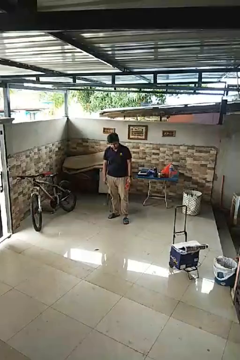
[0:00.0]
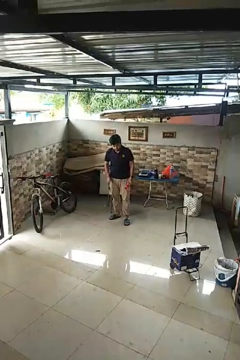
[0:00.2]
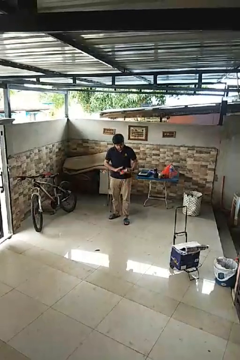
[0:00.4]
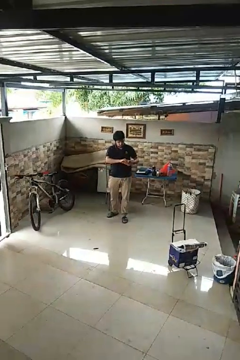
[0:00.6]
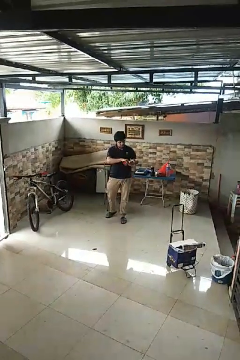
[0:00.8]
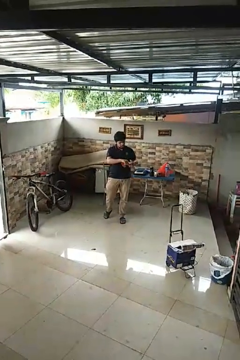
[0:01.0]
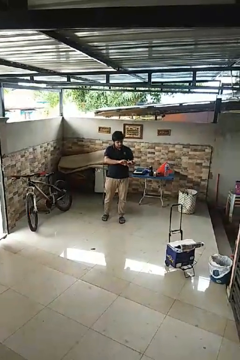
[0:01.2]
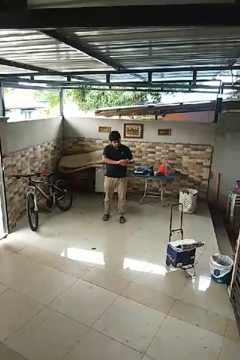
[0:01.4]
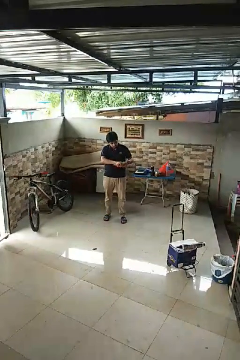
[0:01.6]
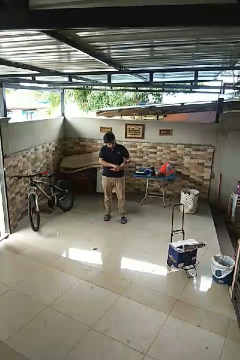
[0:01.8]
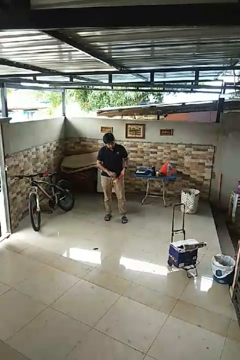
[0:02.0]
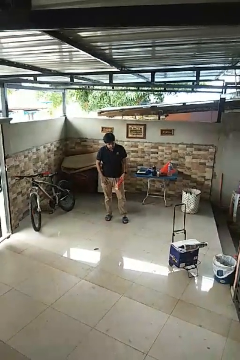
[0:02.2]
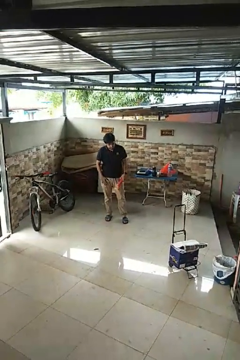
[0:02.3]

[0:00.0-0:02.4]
person squeezes object

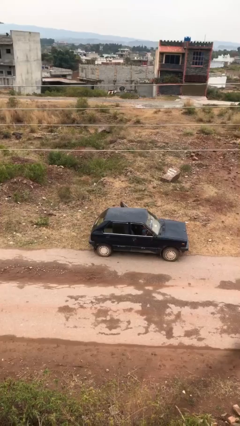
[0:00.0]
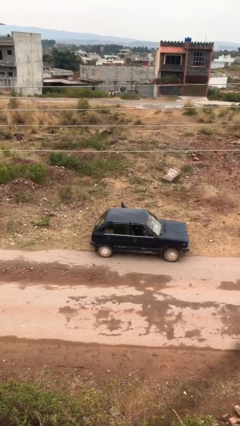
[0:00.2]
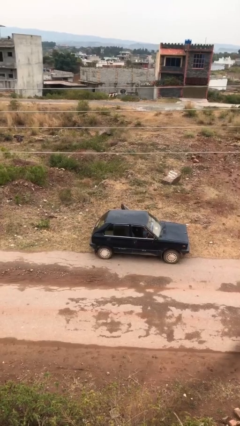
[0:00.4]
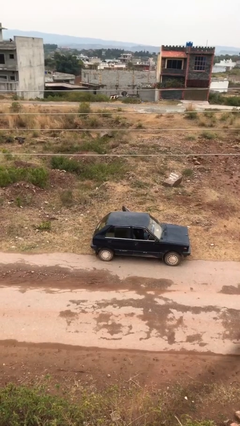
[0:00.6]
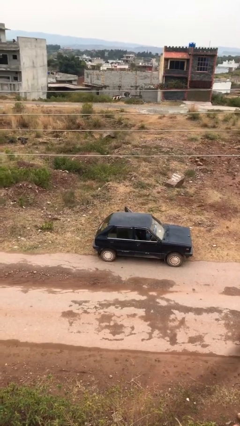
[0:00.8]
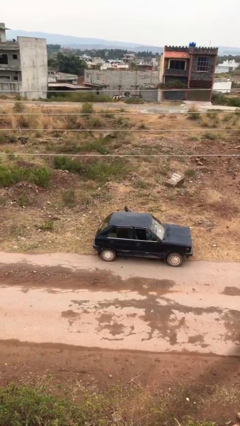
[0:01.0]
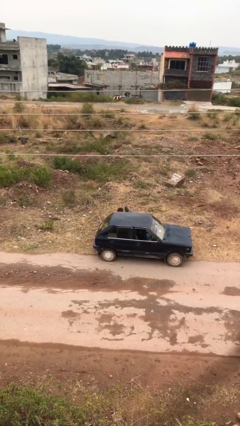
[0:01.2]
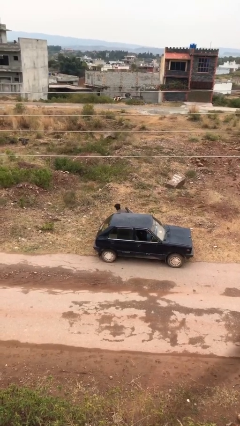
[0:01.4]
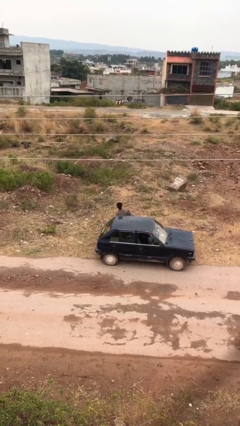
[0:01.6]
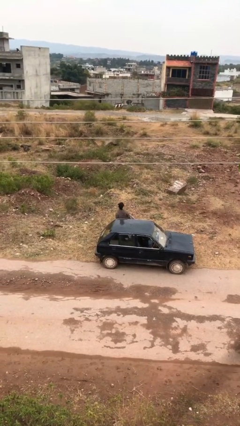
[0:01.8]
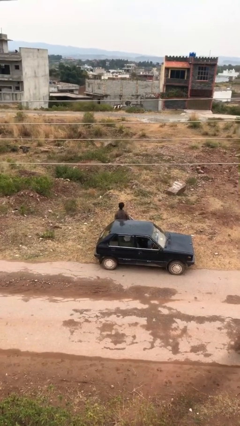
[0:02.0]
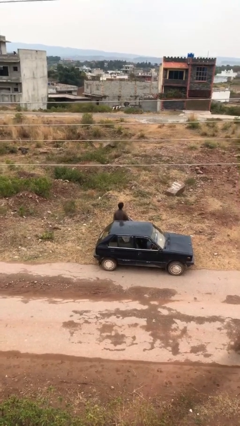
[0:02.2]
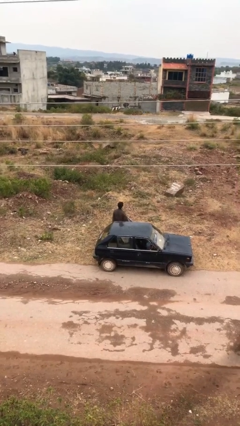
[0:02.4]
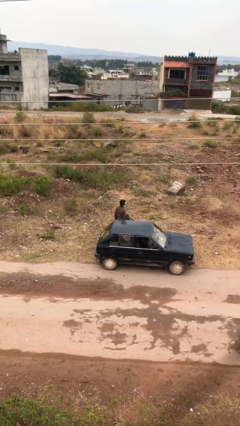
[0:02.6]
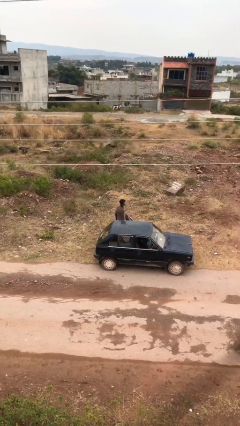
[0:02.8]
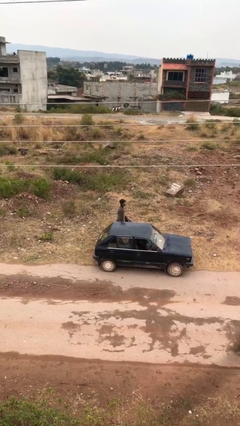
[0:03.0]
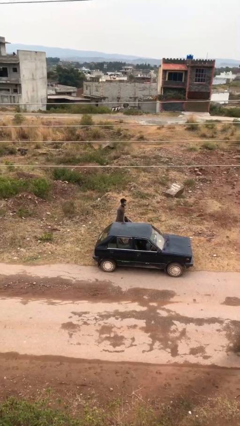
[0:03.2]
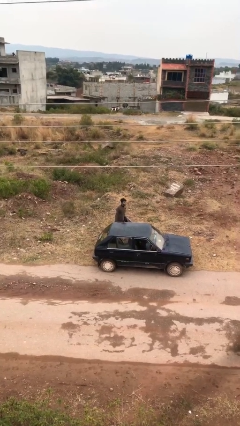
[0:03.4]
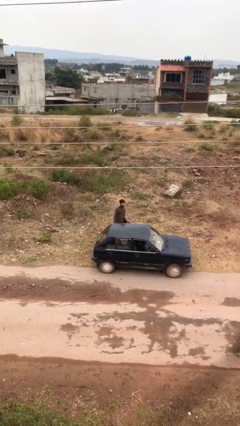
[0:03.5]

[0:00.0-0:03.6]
person exits car

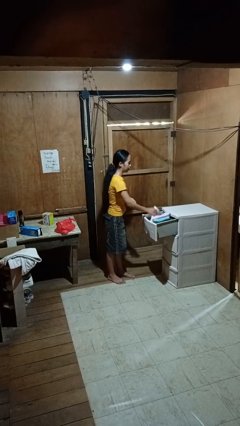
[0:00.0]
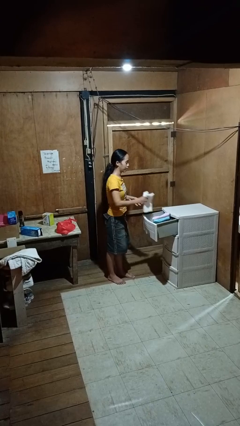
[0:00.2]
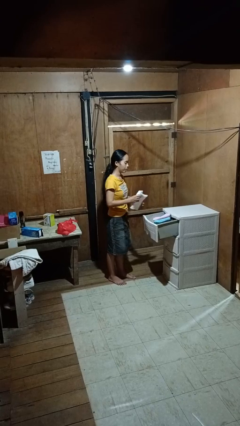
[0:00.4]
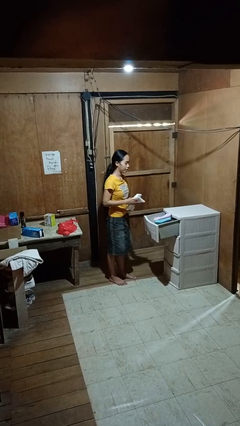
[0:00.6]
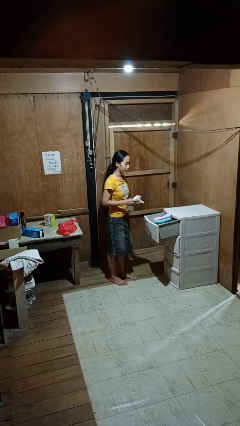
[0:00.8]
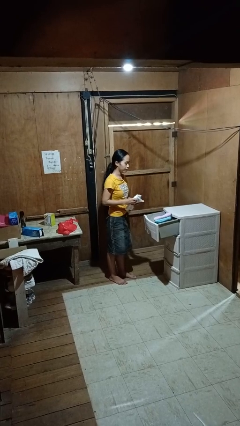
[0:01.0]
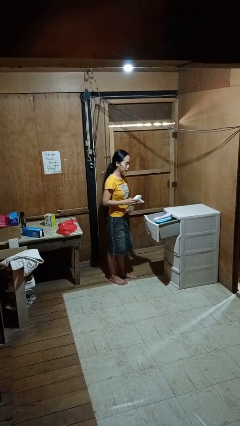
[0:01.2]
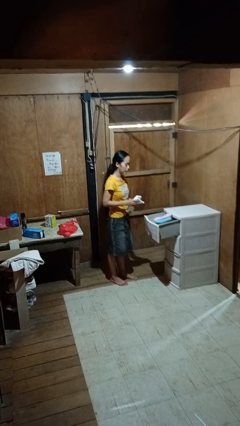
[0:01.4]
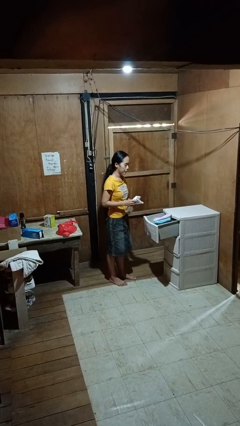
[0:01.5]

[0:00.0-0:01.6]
person takes clothes from dresser

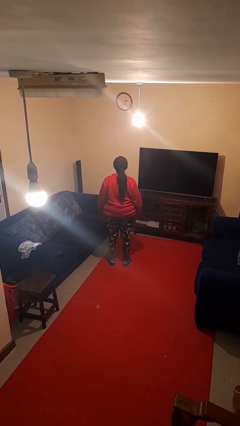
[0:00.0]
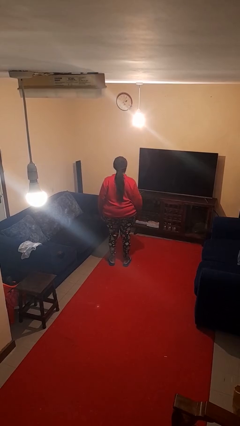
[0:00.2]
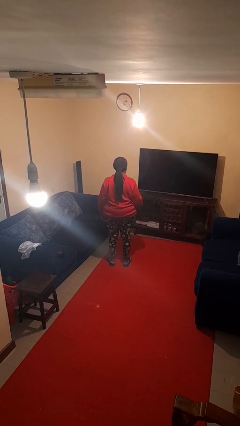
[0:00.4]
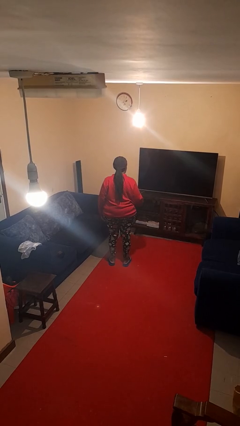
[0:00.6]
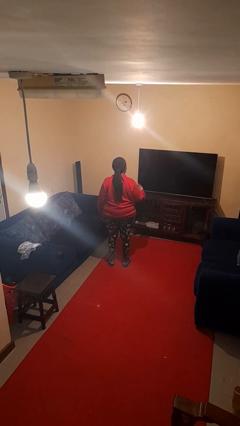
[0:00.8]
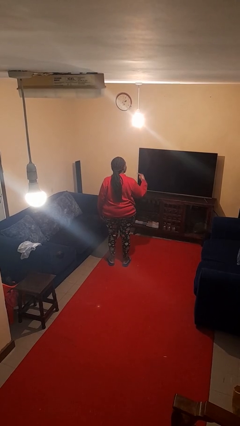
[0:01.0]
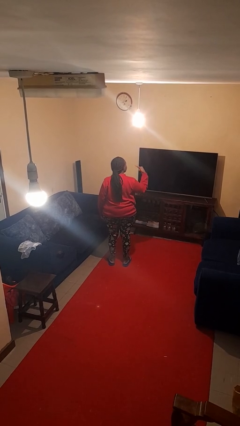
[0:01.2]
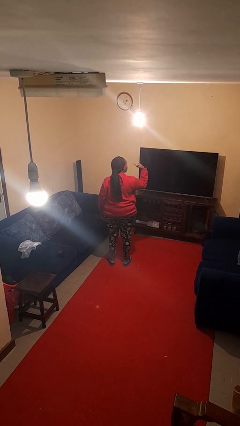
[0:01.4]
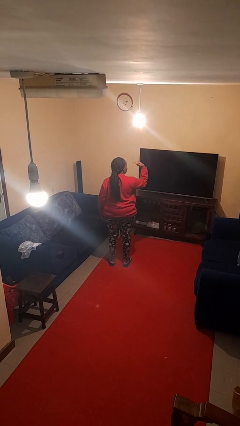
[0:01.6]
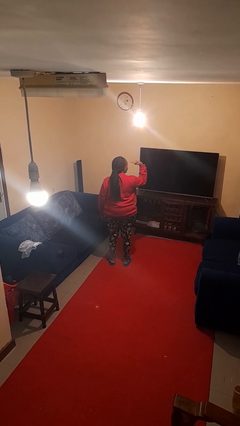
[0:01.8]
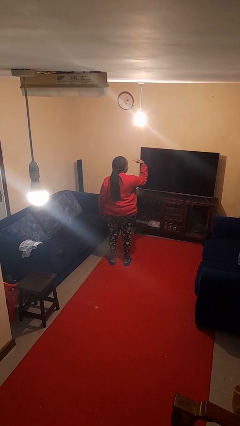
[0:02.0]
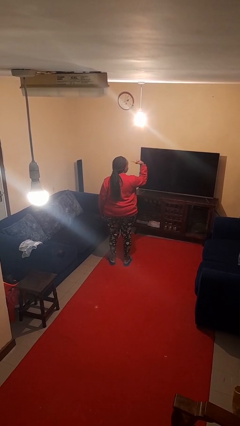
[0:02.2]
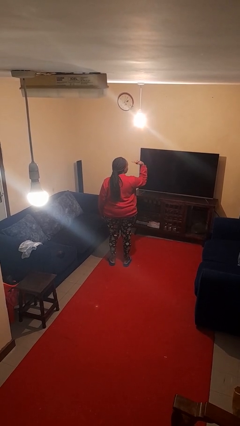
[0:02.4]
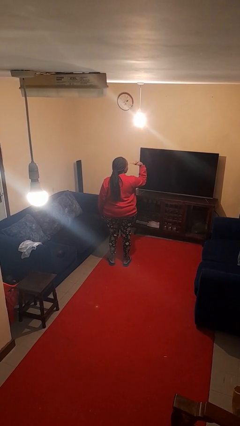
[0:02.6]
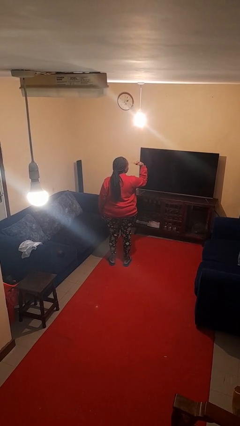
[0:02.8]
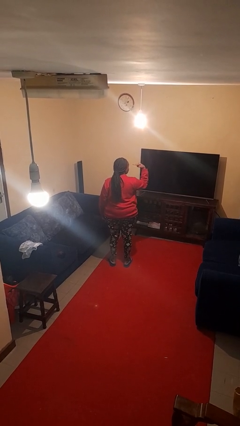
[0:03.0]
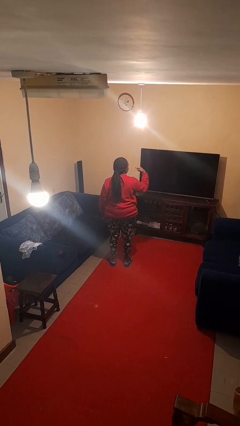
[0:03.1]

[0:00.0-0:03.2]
person gestures watch closely

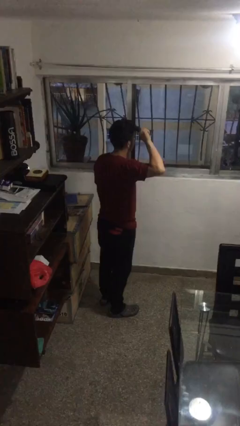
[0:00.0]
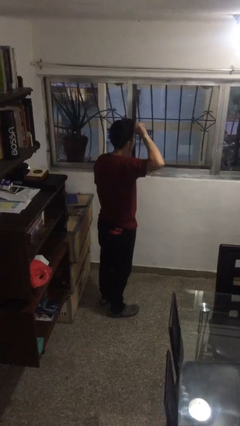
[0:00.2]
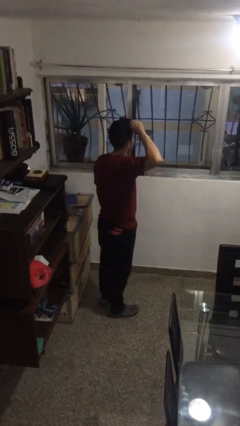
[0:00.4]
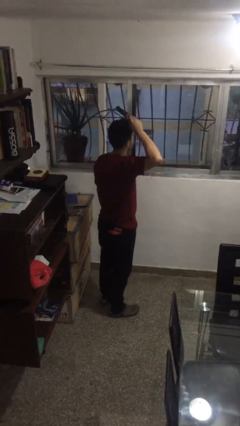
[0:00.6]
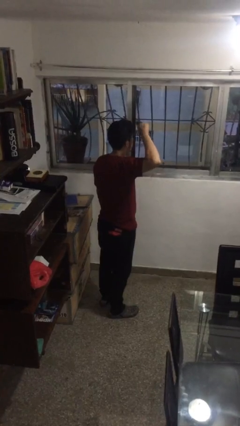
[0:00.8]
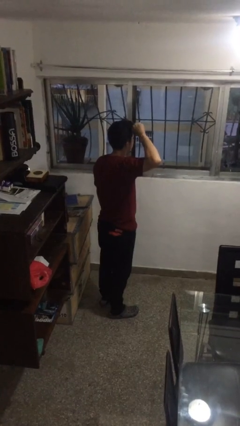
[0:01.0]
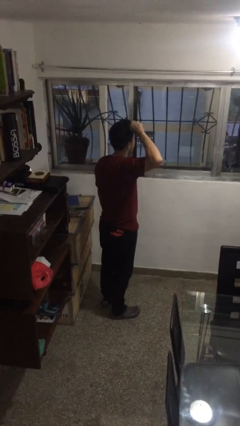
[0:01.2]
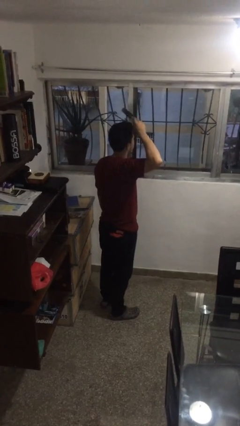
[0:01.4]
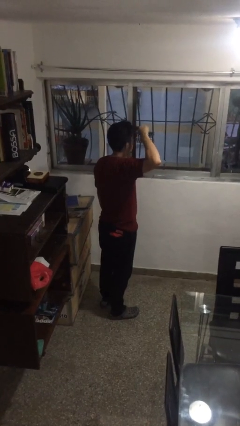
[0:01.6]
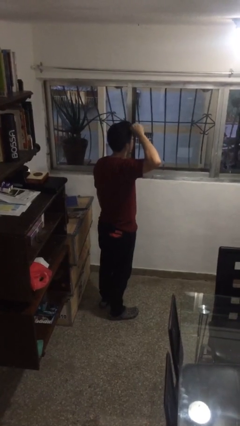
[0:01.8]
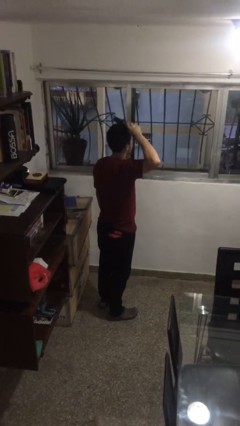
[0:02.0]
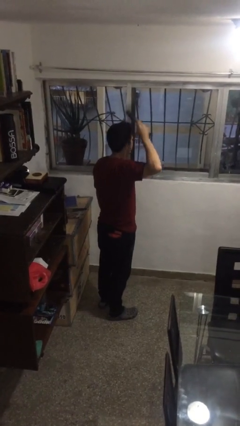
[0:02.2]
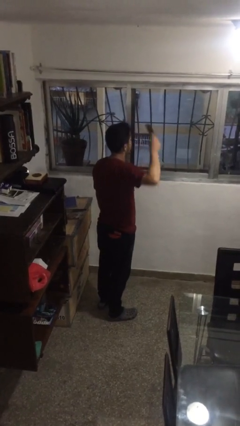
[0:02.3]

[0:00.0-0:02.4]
person brushes hair

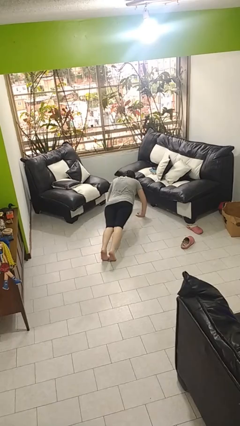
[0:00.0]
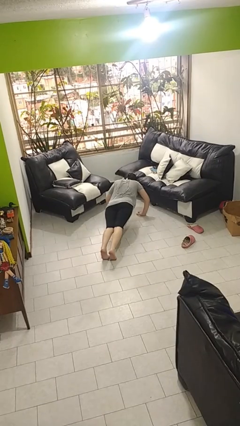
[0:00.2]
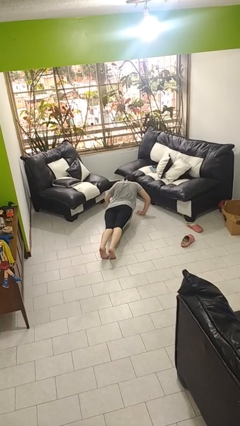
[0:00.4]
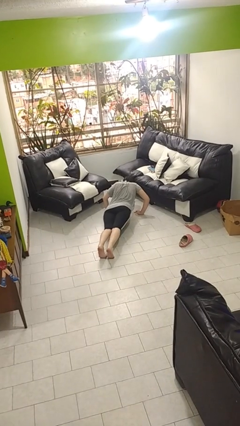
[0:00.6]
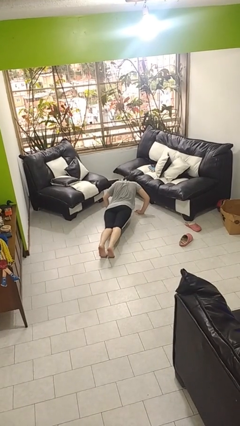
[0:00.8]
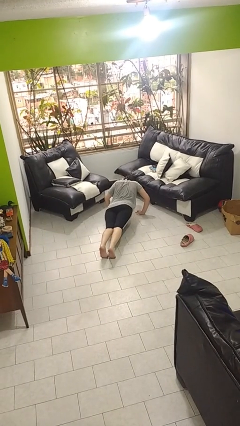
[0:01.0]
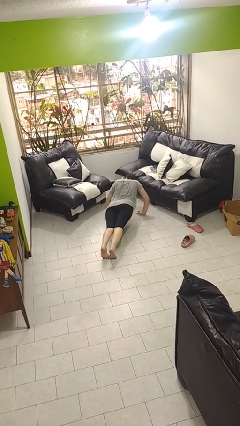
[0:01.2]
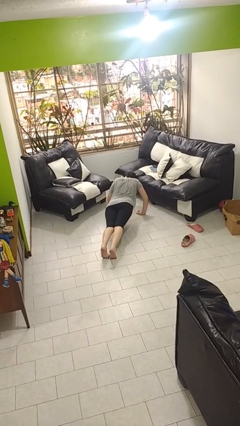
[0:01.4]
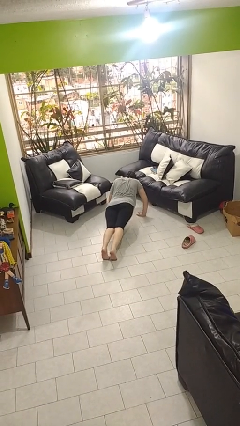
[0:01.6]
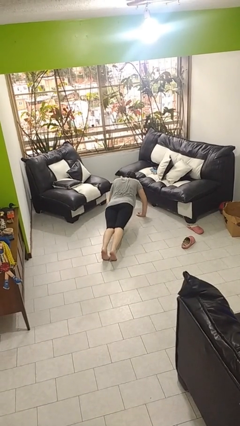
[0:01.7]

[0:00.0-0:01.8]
person exercises with pushup

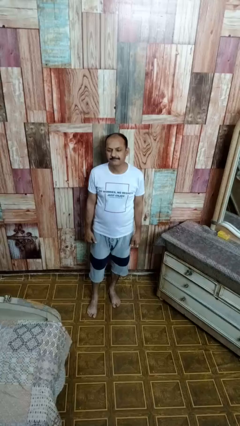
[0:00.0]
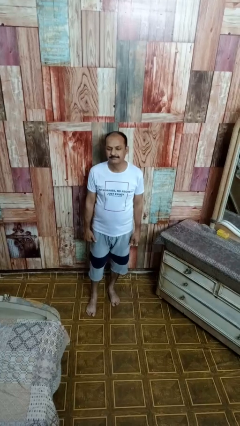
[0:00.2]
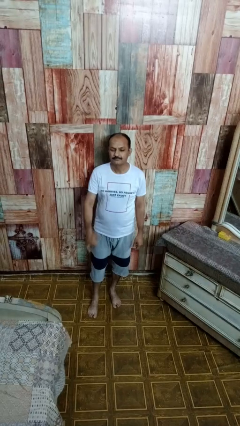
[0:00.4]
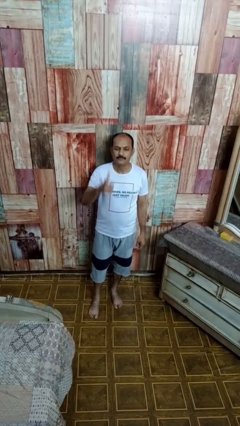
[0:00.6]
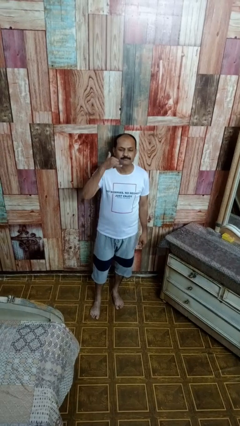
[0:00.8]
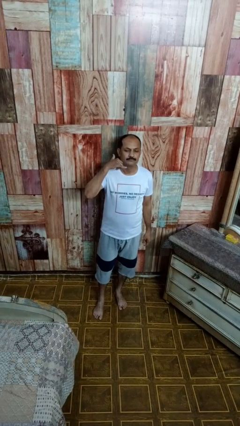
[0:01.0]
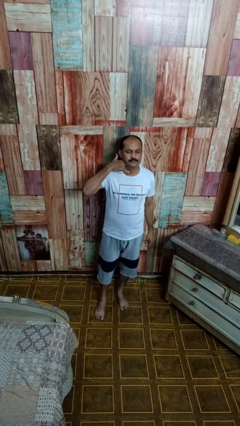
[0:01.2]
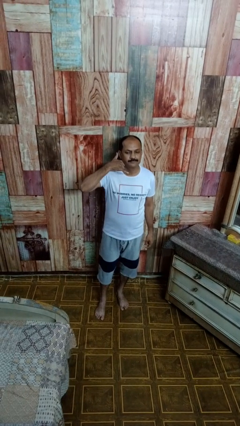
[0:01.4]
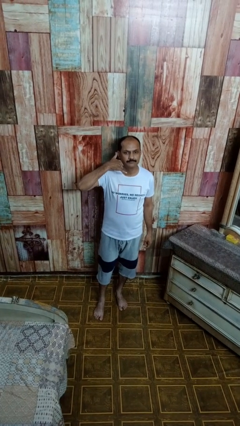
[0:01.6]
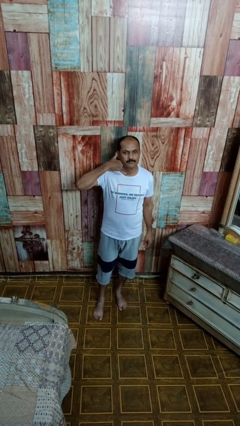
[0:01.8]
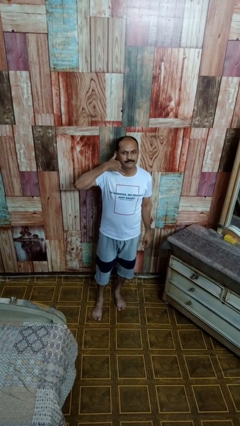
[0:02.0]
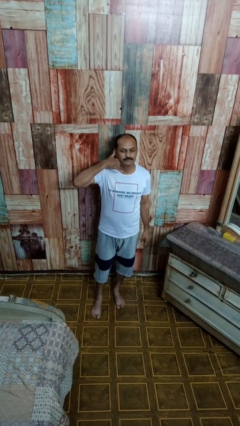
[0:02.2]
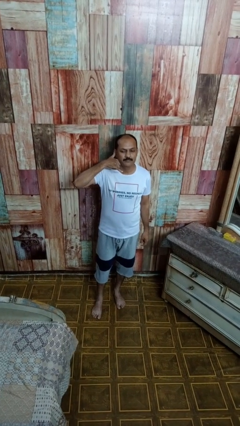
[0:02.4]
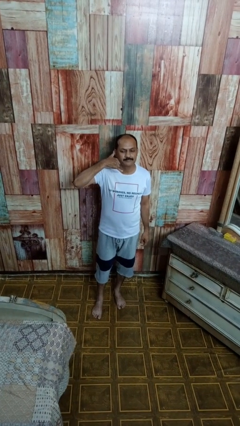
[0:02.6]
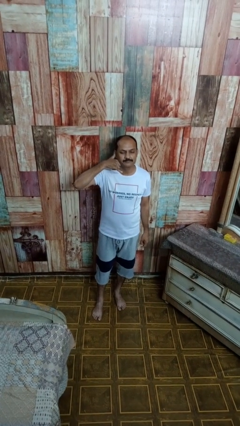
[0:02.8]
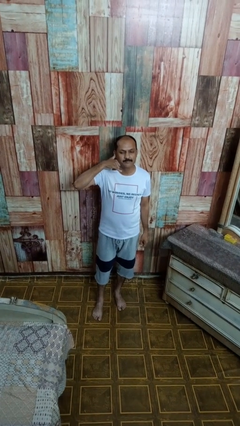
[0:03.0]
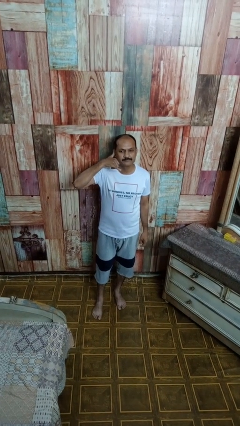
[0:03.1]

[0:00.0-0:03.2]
person gestures call me
